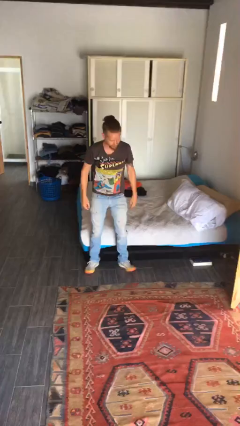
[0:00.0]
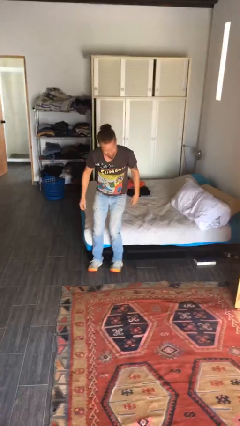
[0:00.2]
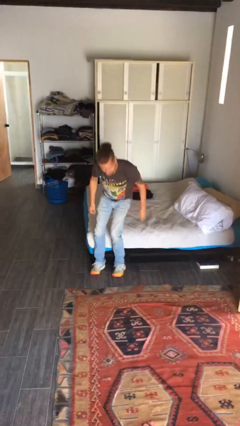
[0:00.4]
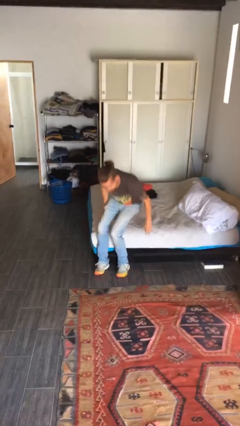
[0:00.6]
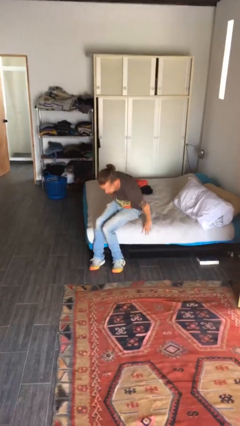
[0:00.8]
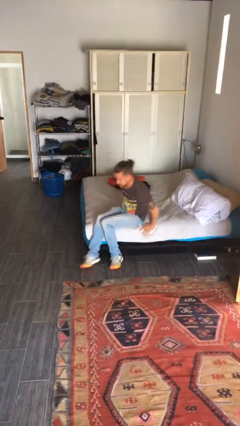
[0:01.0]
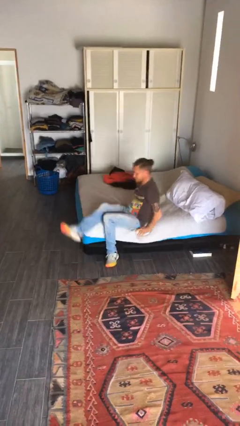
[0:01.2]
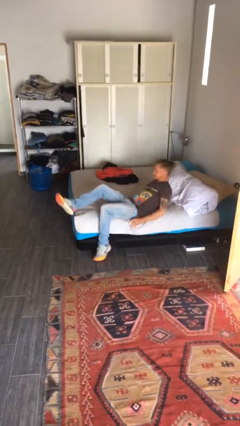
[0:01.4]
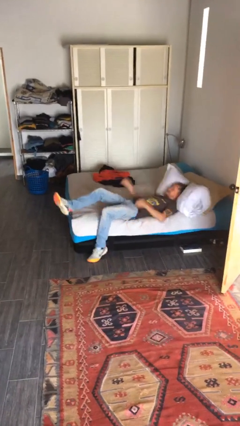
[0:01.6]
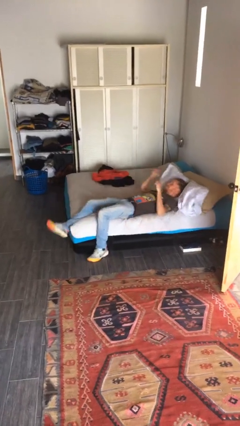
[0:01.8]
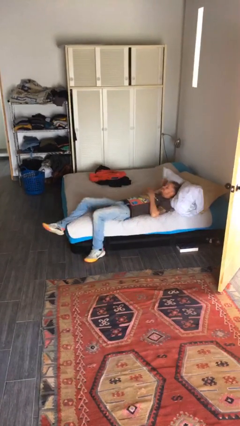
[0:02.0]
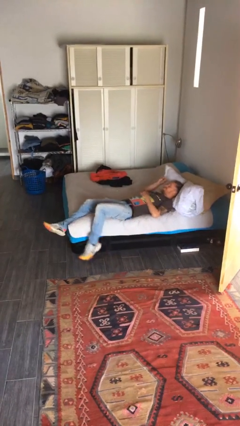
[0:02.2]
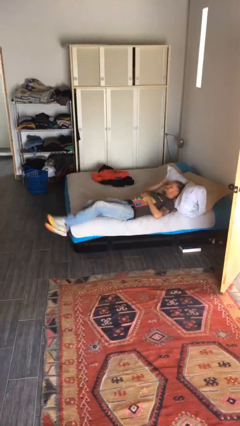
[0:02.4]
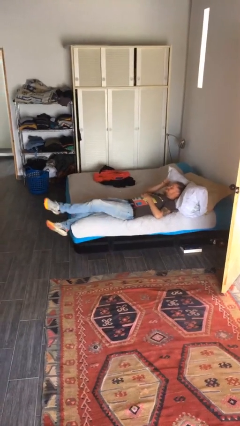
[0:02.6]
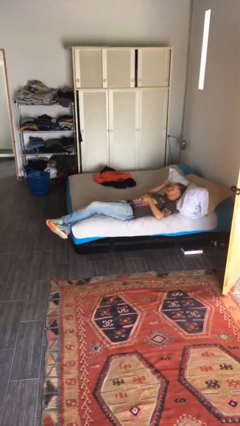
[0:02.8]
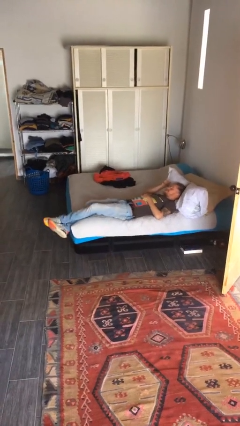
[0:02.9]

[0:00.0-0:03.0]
person lies down on bed

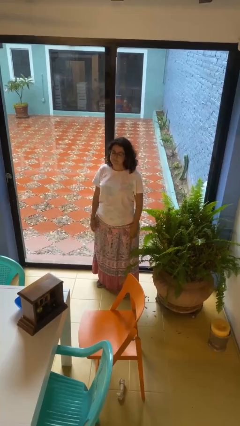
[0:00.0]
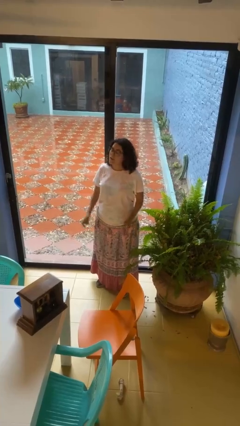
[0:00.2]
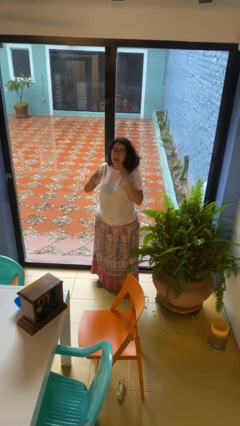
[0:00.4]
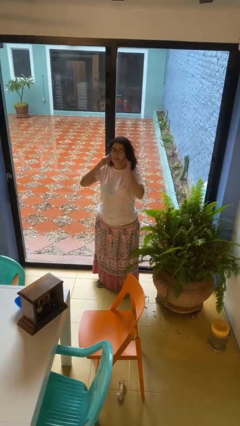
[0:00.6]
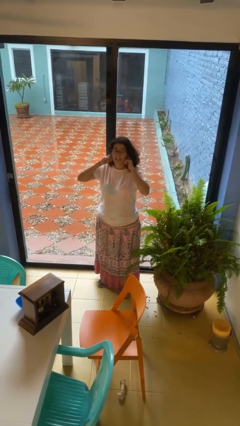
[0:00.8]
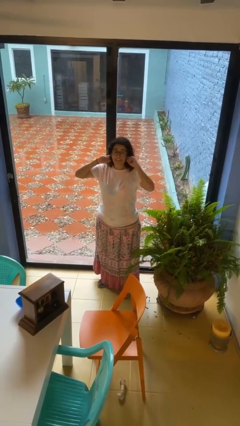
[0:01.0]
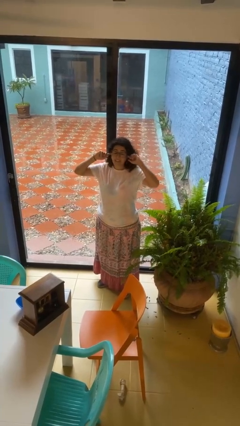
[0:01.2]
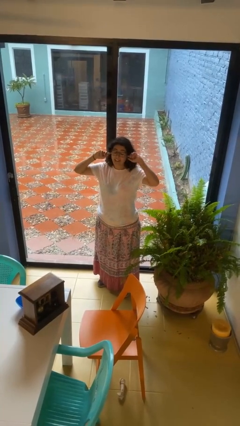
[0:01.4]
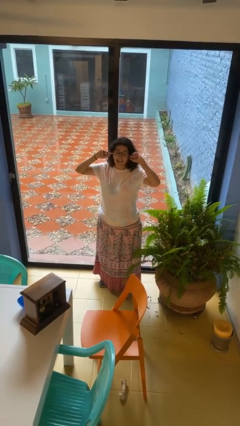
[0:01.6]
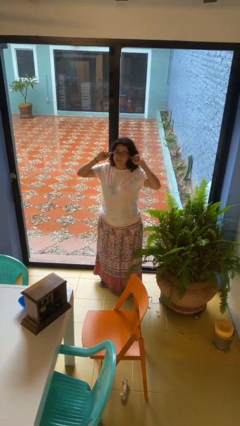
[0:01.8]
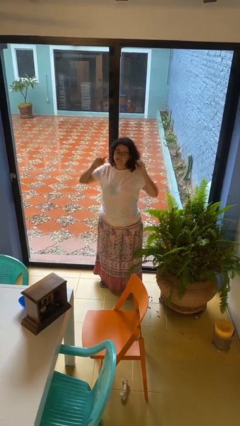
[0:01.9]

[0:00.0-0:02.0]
person puts fingers in ear

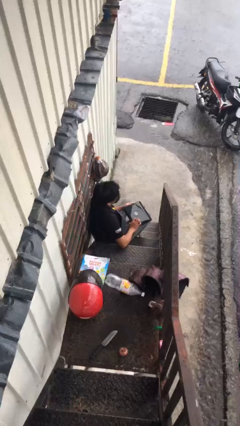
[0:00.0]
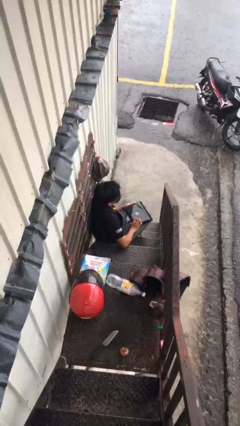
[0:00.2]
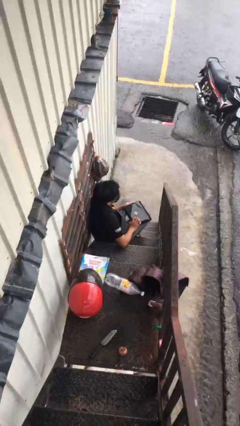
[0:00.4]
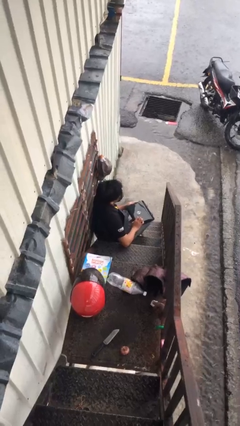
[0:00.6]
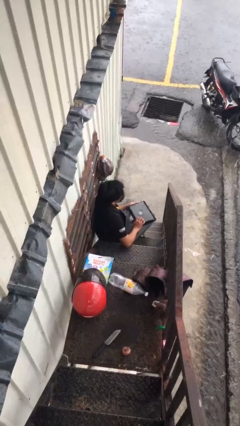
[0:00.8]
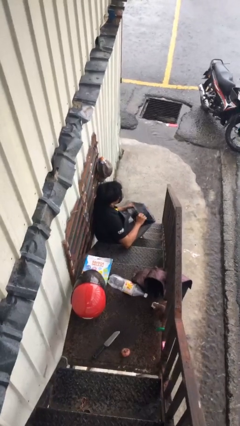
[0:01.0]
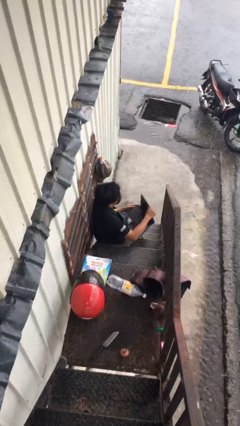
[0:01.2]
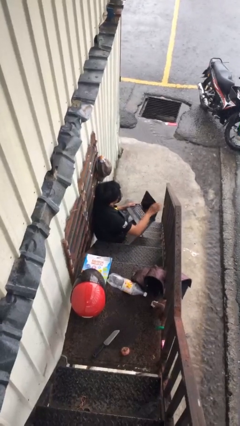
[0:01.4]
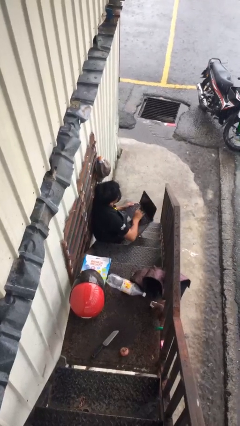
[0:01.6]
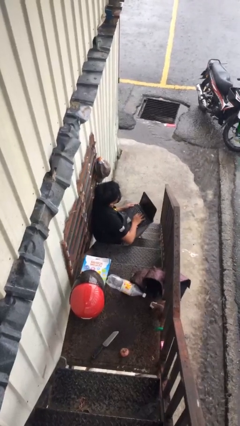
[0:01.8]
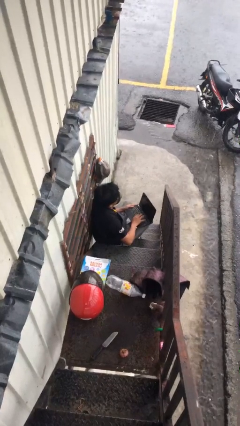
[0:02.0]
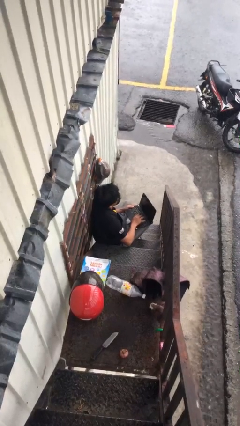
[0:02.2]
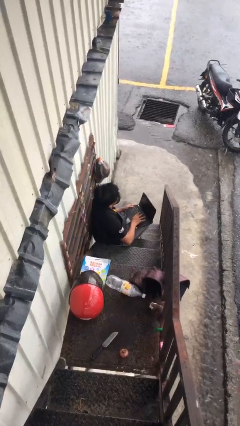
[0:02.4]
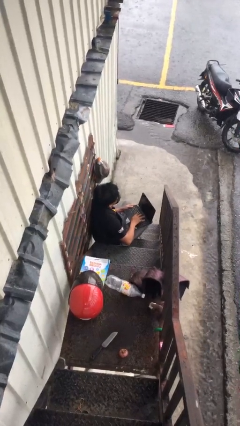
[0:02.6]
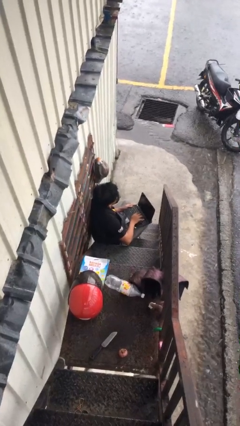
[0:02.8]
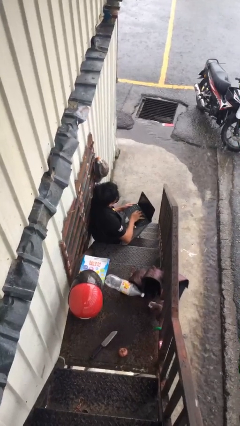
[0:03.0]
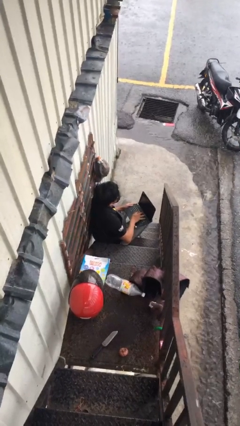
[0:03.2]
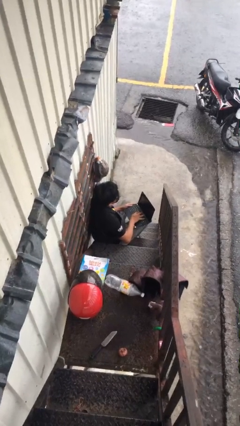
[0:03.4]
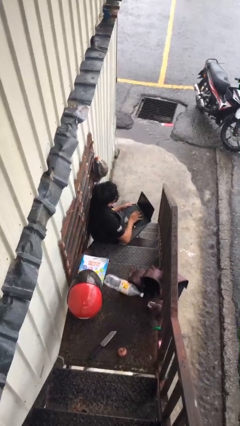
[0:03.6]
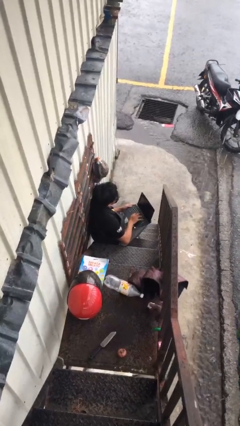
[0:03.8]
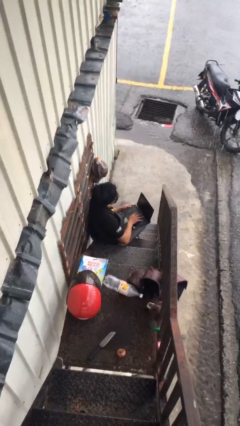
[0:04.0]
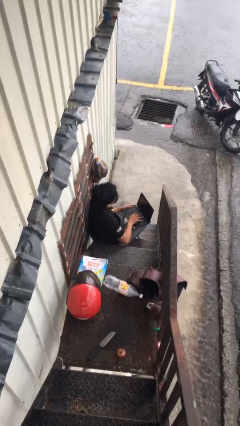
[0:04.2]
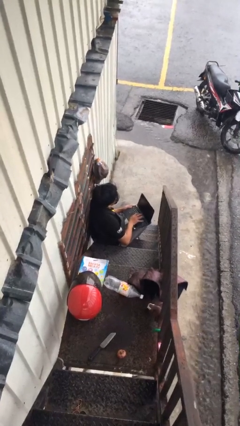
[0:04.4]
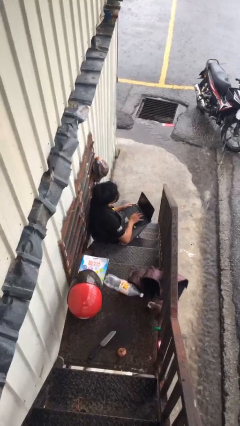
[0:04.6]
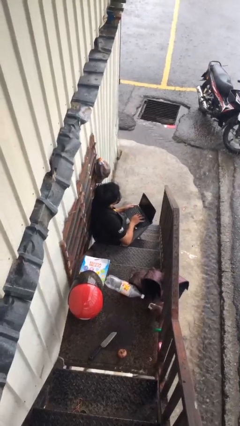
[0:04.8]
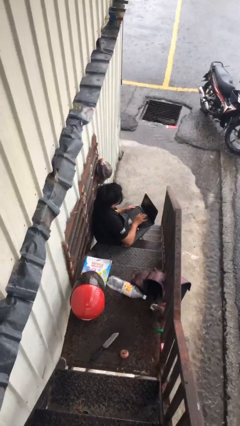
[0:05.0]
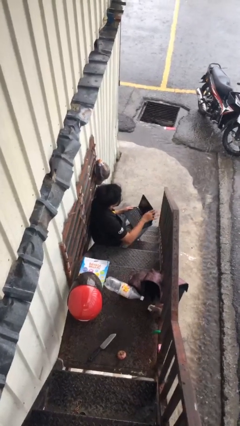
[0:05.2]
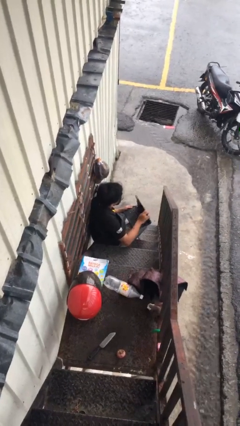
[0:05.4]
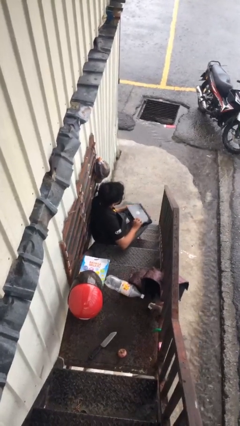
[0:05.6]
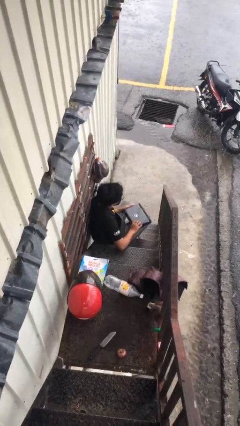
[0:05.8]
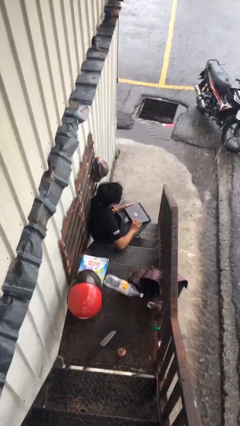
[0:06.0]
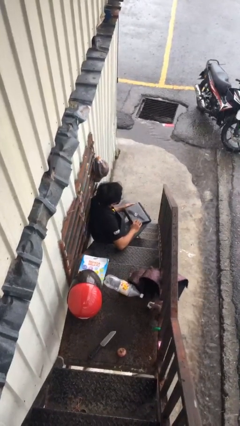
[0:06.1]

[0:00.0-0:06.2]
person interacts with laptop

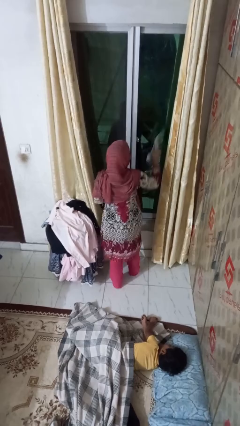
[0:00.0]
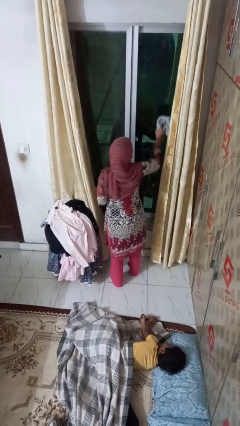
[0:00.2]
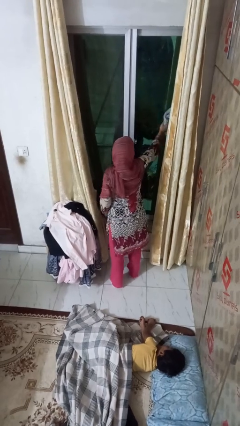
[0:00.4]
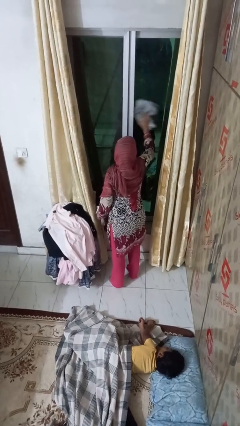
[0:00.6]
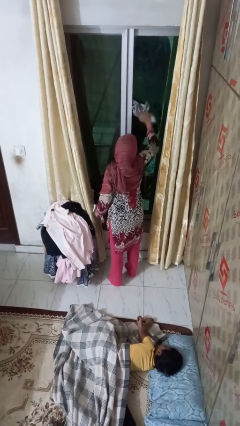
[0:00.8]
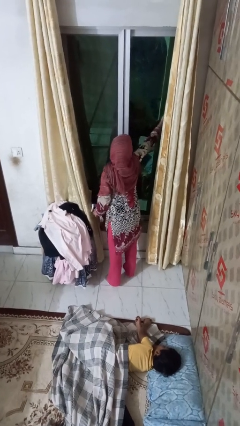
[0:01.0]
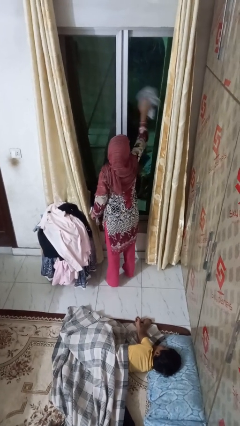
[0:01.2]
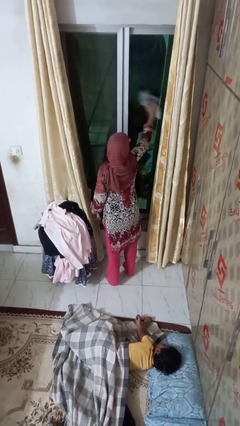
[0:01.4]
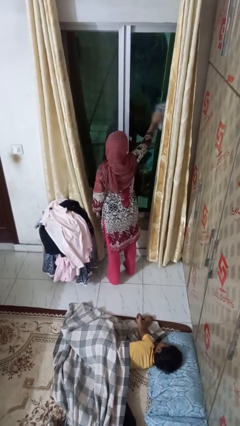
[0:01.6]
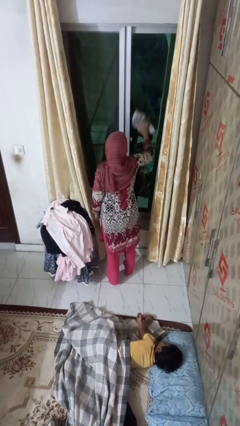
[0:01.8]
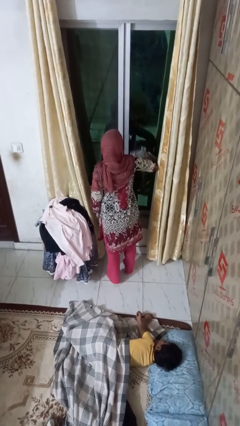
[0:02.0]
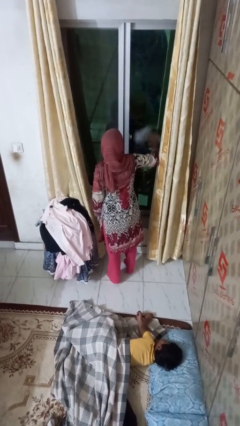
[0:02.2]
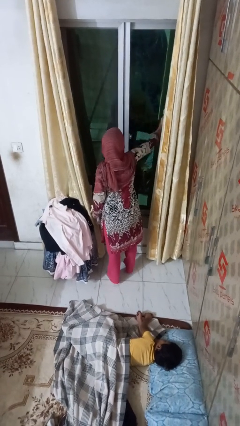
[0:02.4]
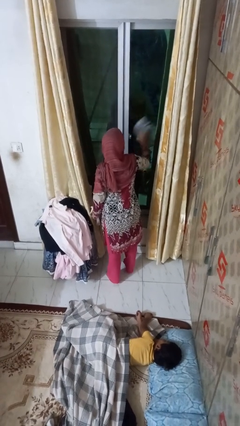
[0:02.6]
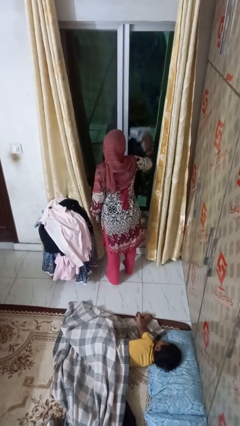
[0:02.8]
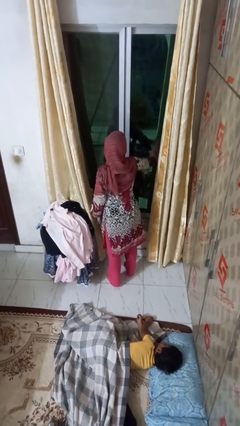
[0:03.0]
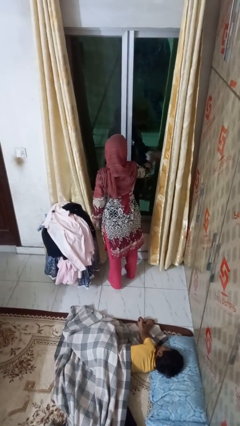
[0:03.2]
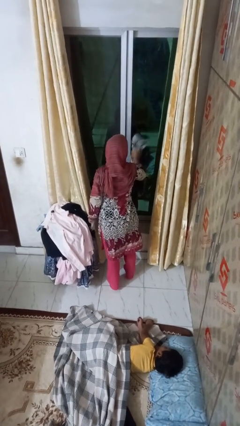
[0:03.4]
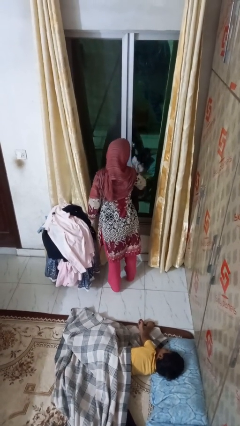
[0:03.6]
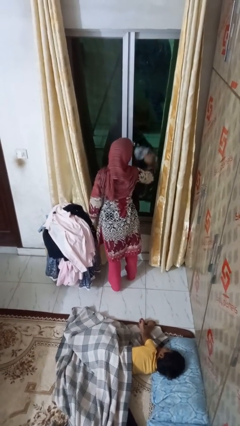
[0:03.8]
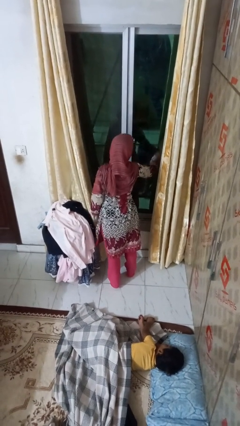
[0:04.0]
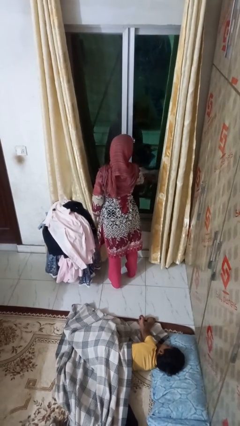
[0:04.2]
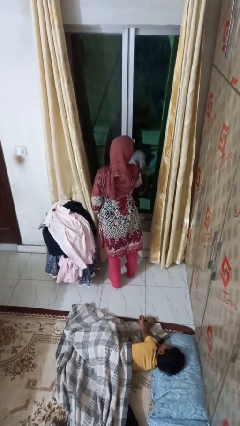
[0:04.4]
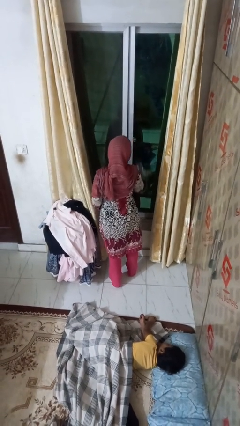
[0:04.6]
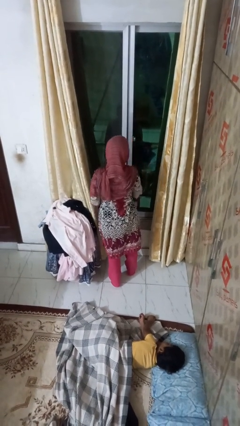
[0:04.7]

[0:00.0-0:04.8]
person washes window

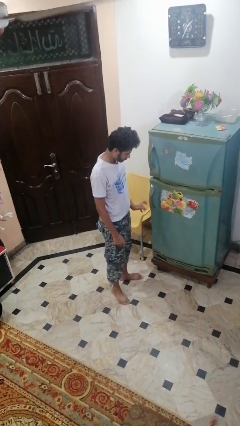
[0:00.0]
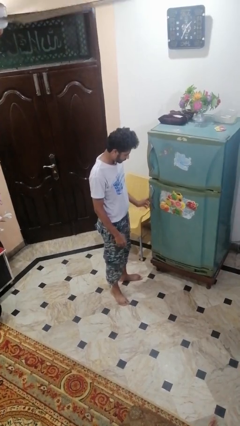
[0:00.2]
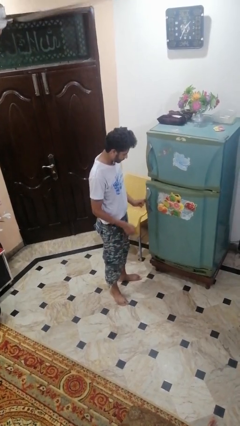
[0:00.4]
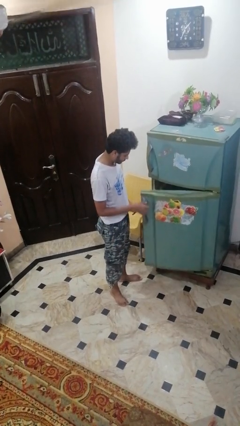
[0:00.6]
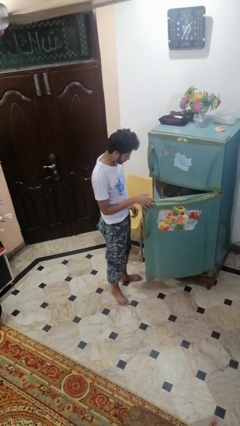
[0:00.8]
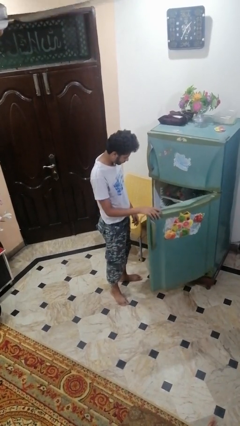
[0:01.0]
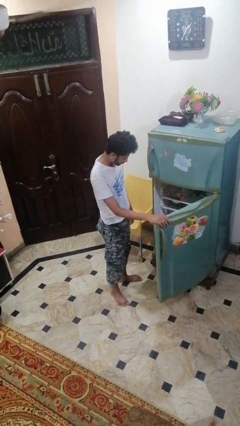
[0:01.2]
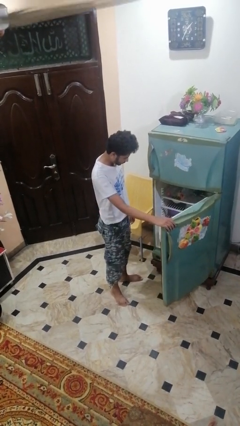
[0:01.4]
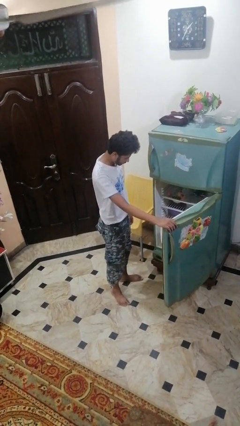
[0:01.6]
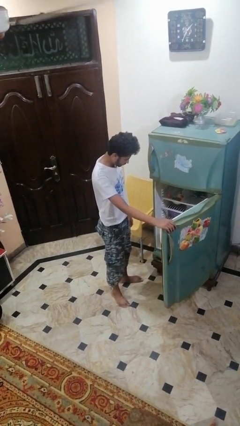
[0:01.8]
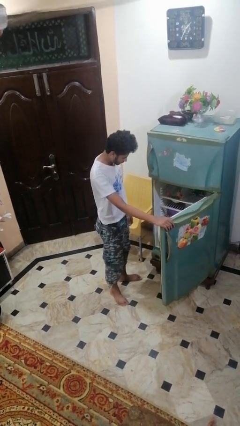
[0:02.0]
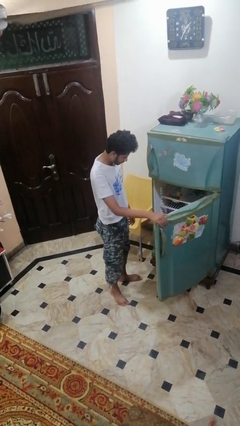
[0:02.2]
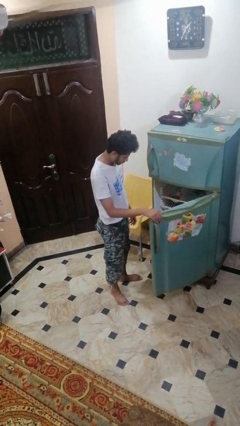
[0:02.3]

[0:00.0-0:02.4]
person opens refrigerator
